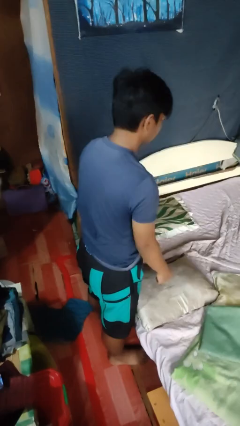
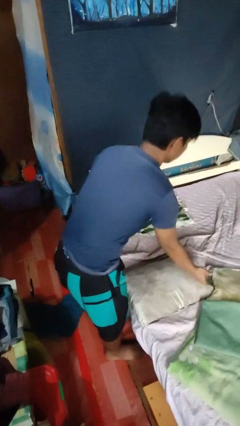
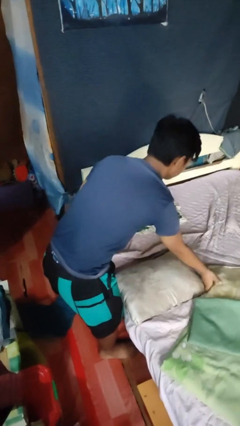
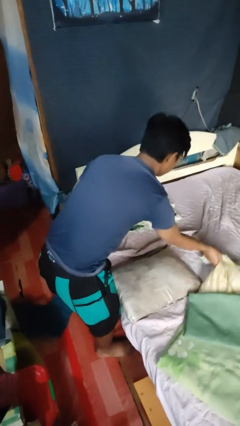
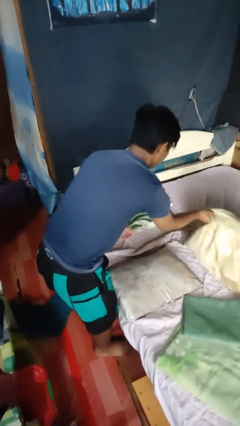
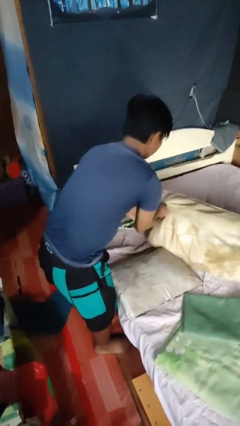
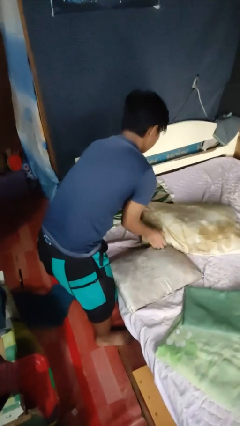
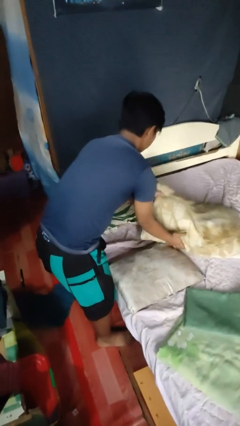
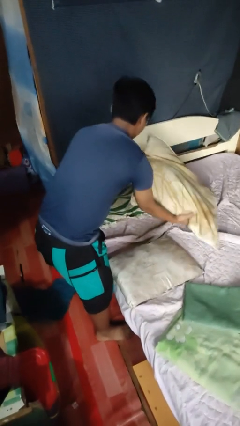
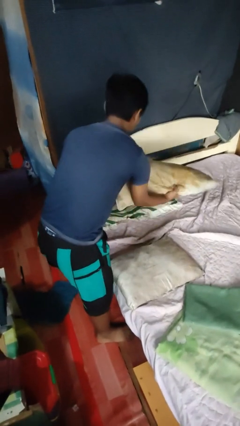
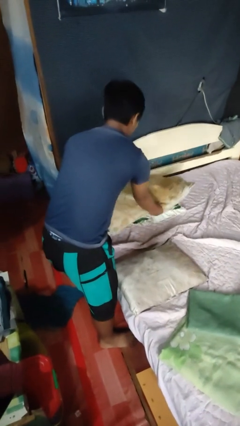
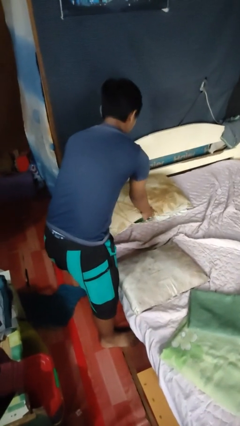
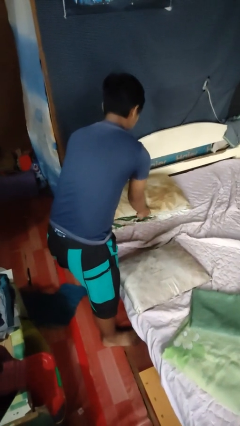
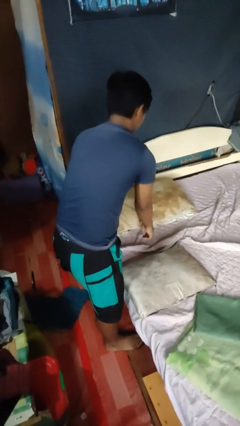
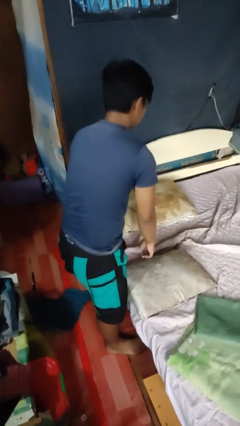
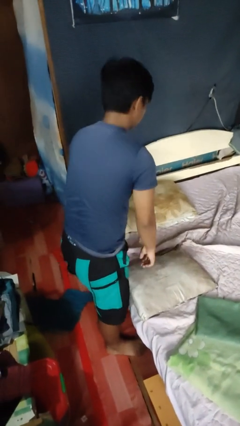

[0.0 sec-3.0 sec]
person makes bed

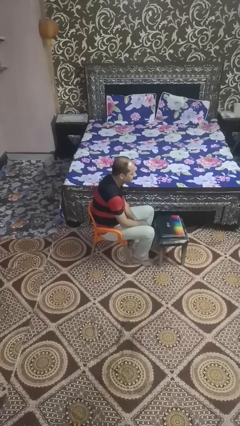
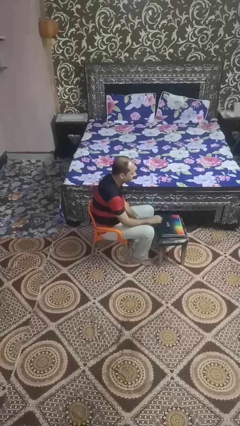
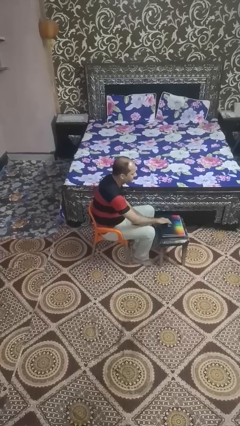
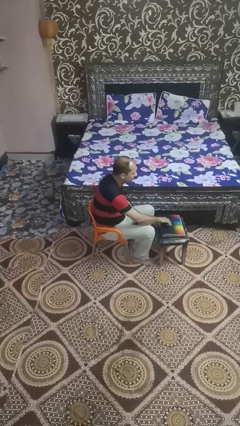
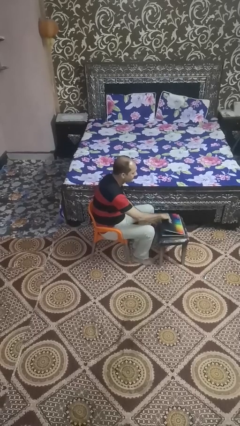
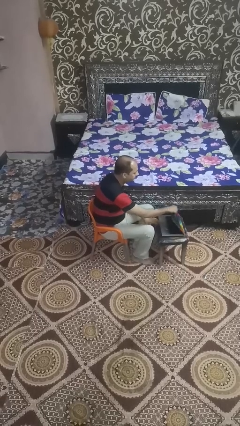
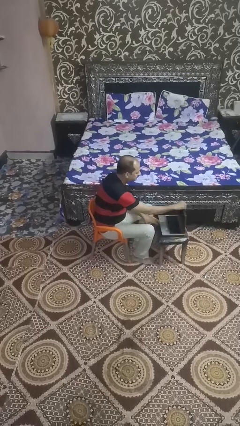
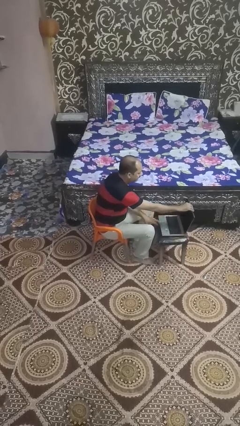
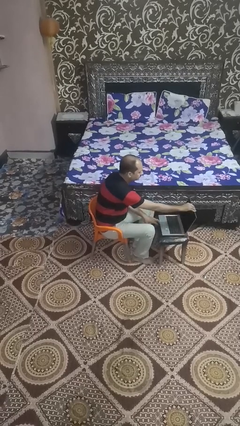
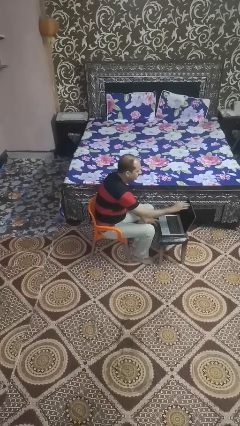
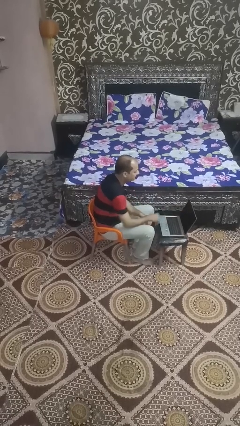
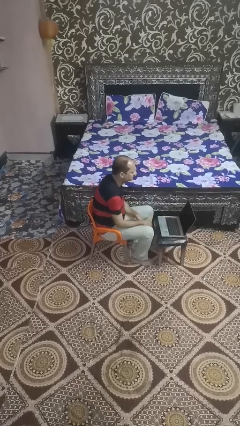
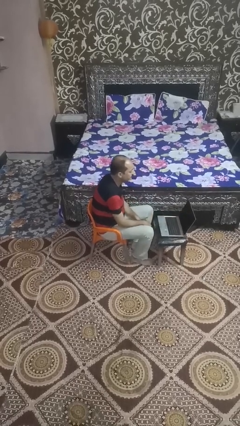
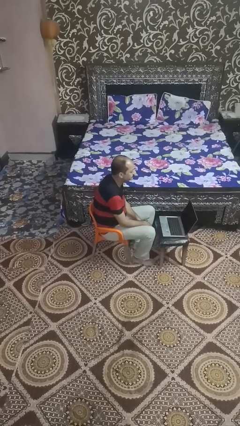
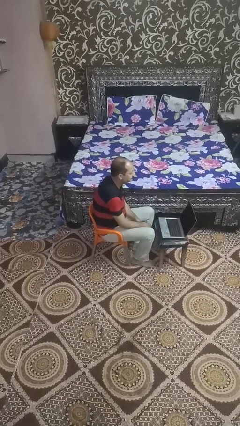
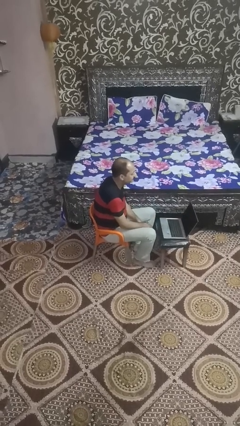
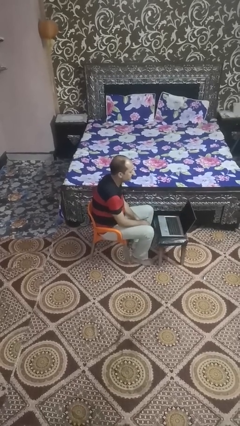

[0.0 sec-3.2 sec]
person opens laptop

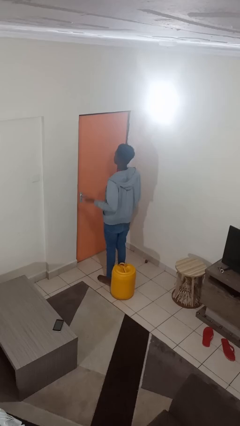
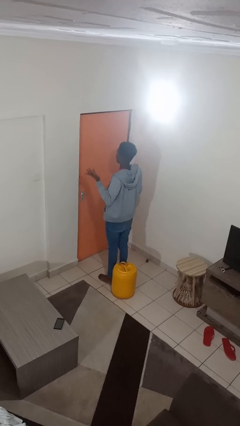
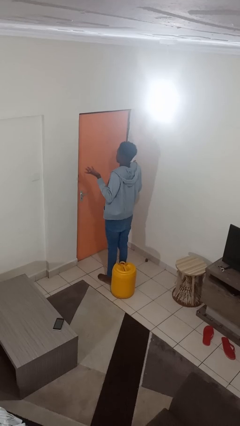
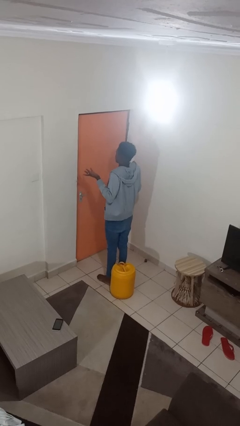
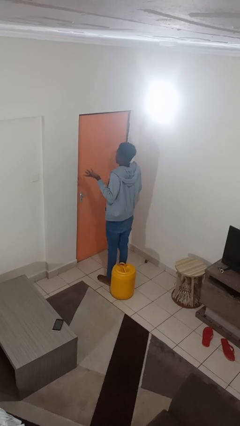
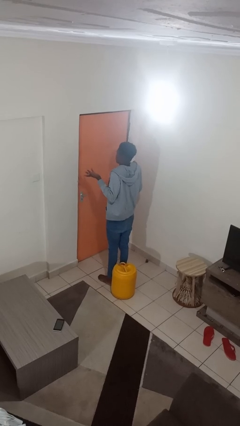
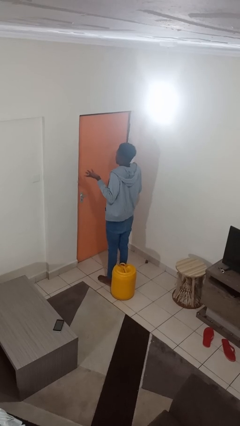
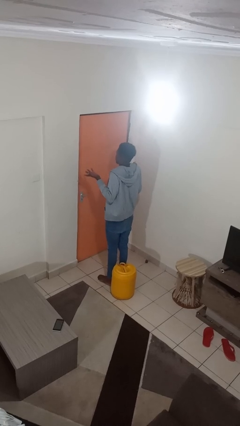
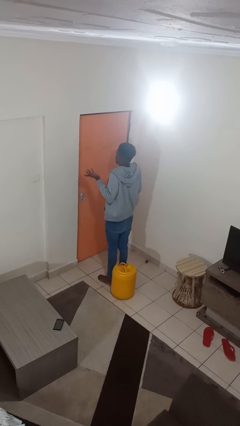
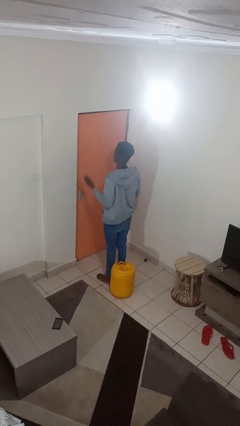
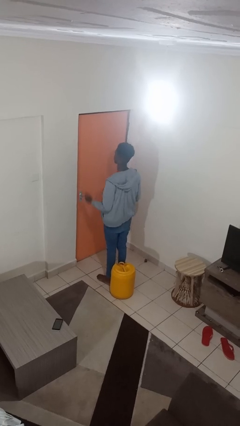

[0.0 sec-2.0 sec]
person shrugs

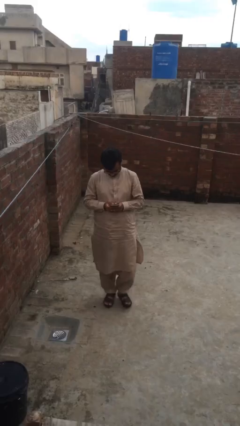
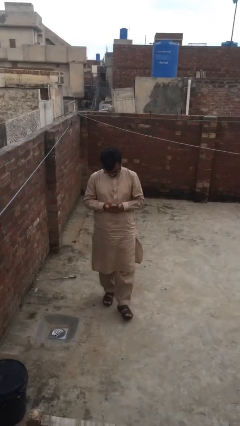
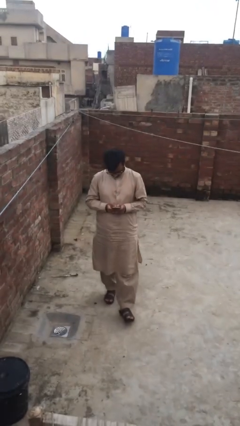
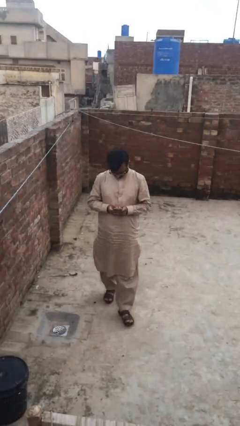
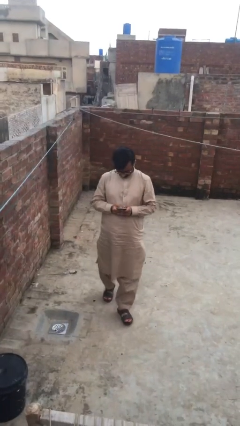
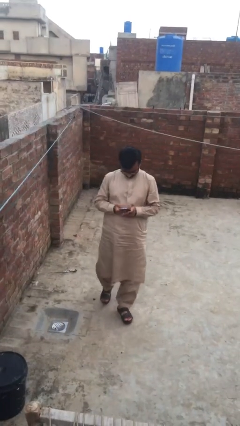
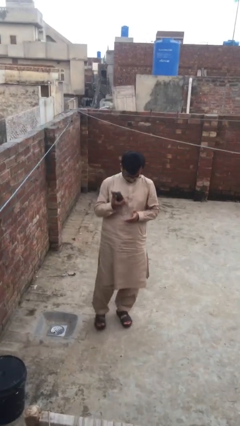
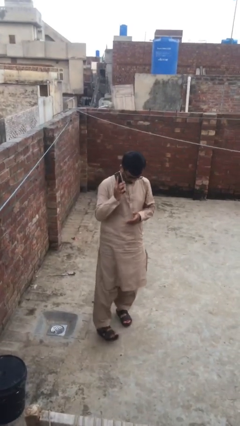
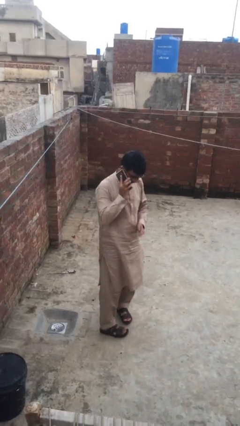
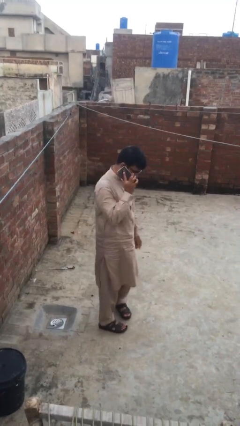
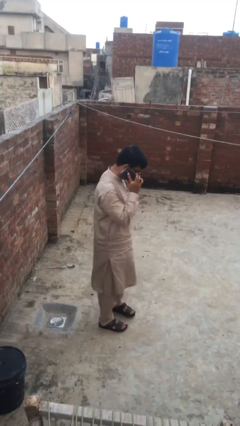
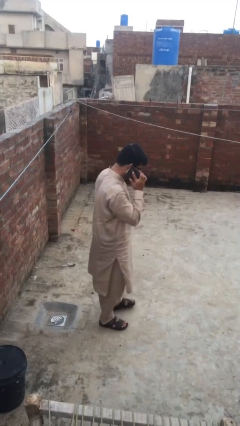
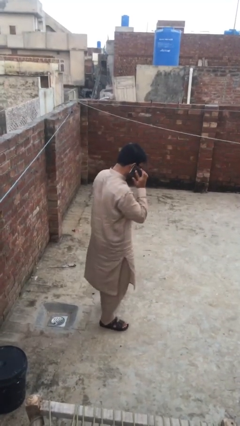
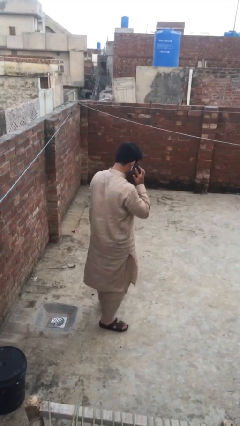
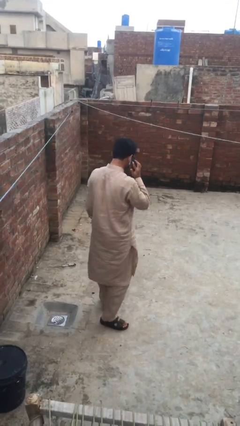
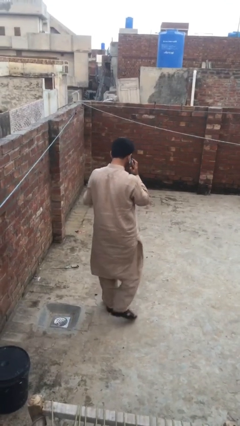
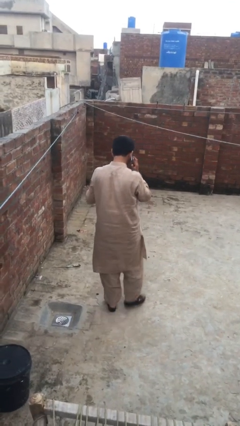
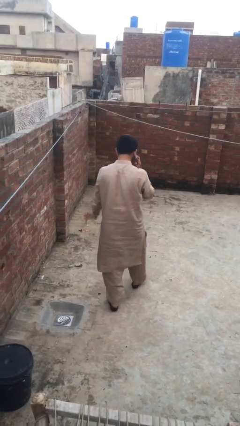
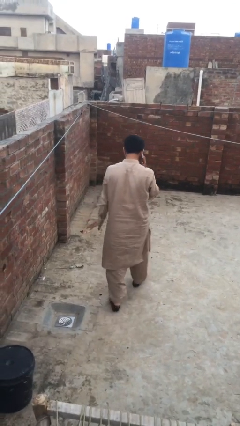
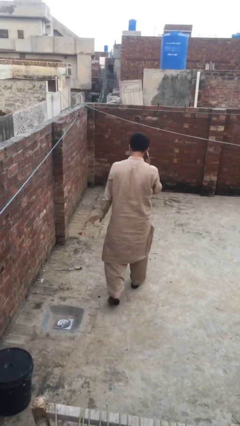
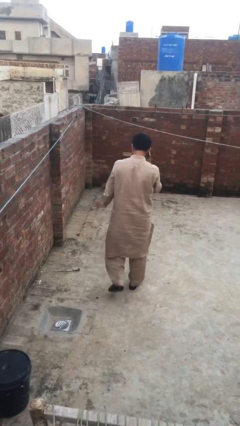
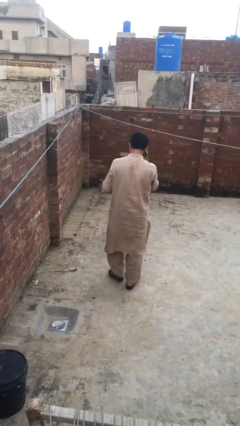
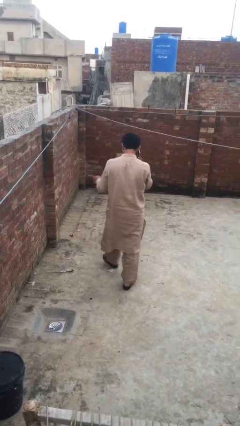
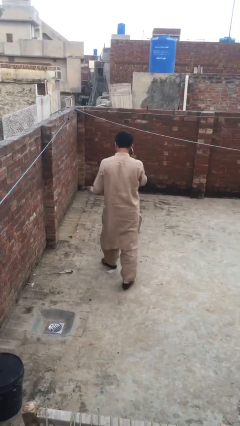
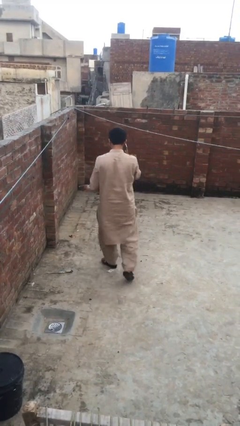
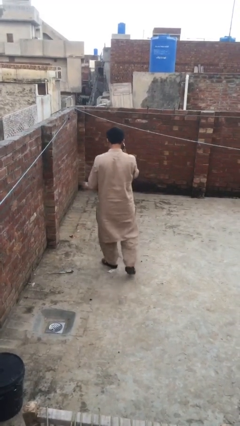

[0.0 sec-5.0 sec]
person talks on phone

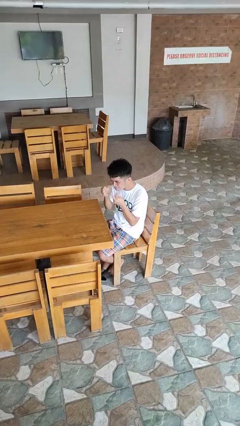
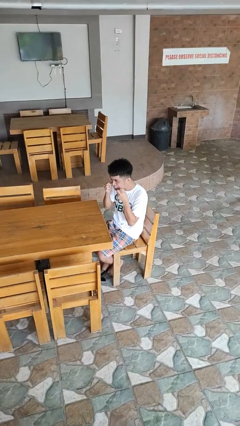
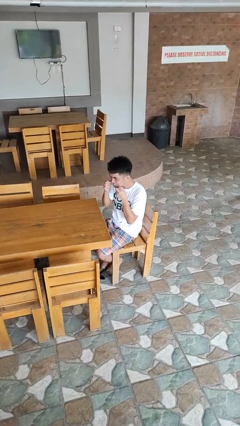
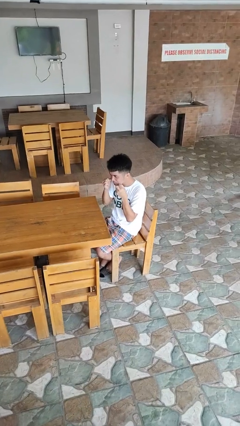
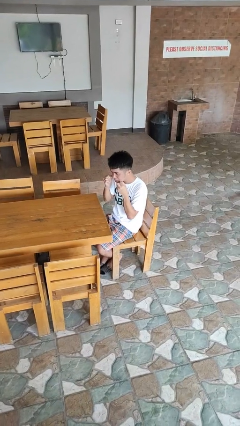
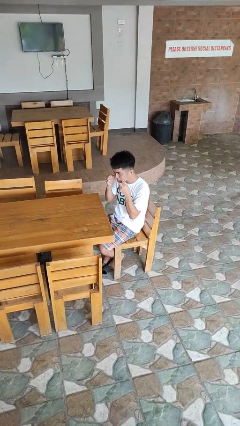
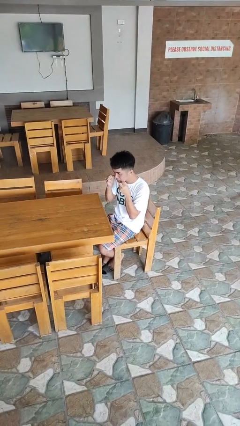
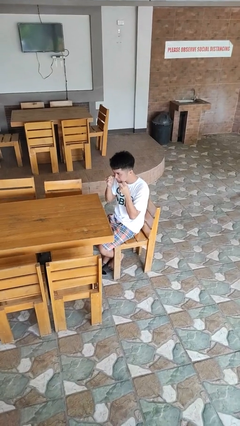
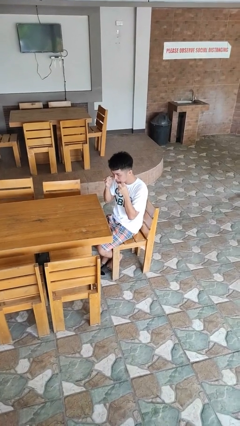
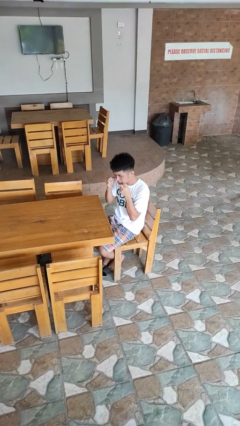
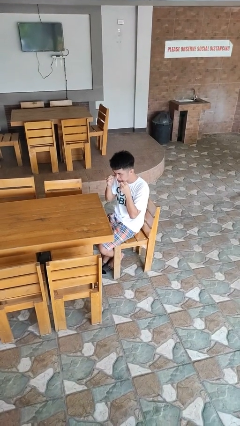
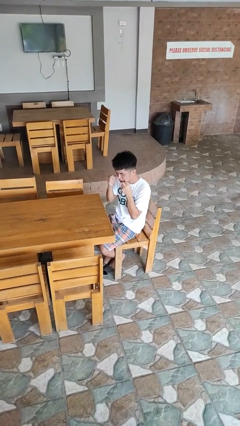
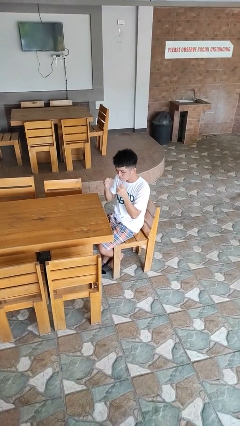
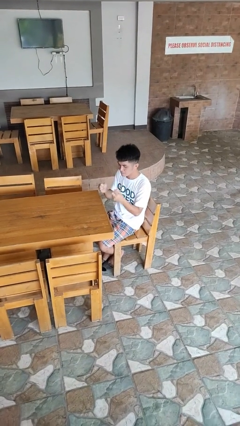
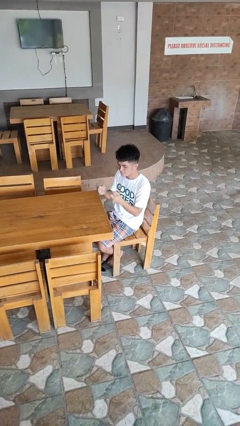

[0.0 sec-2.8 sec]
person flosses

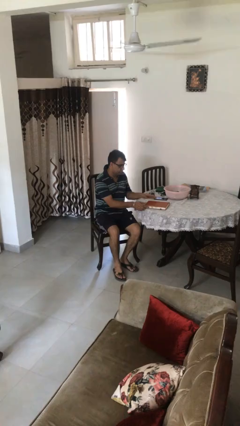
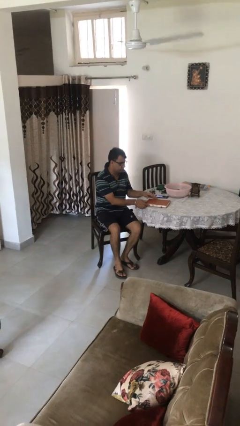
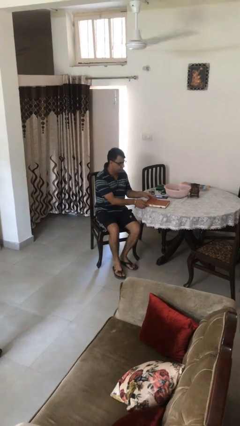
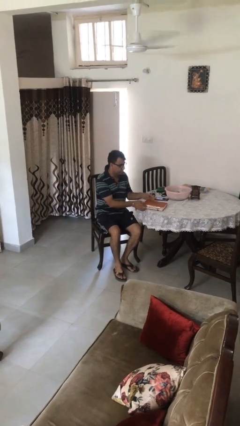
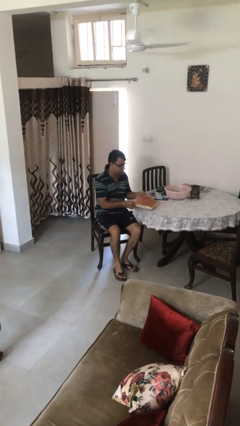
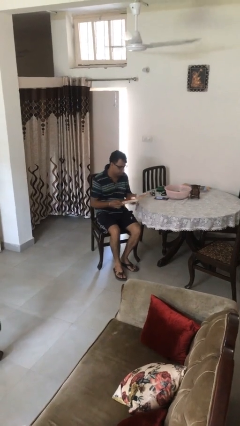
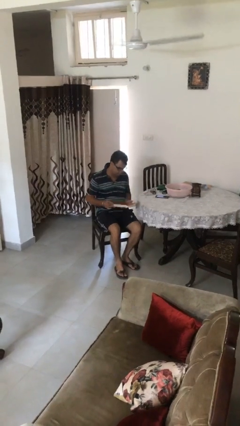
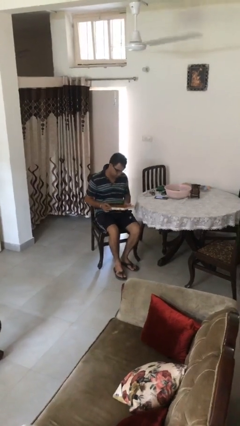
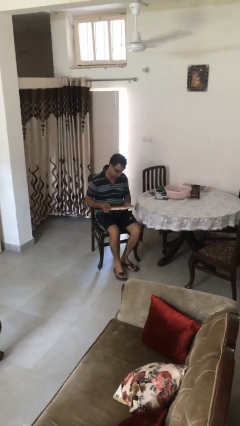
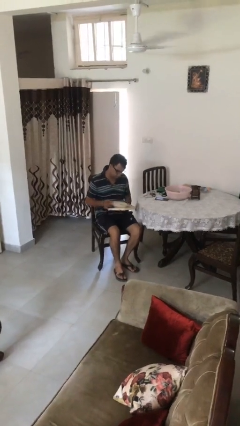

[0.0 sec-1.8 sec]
person picks up object from table
